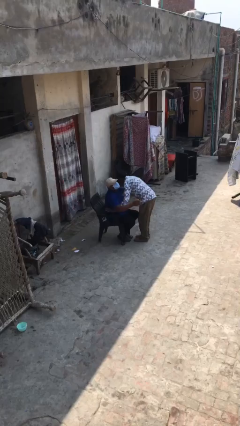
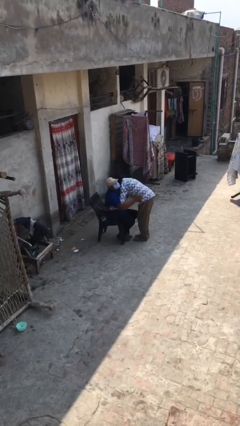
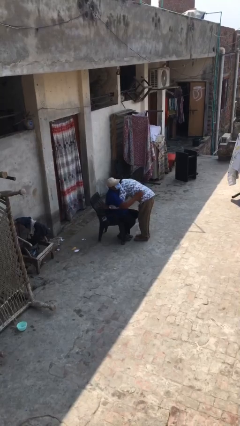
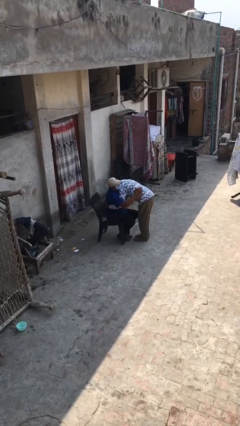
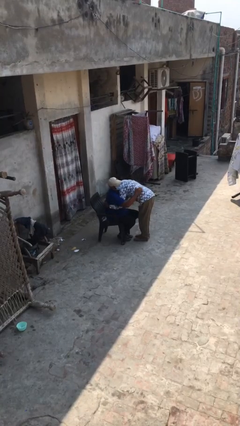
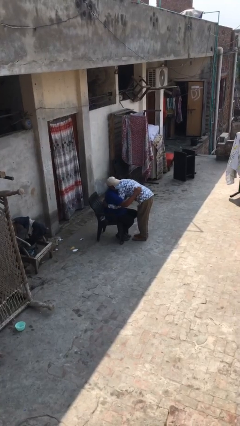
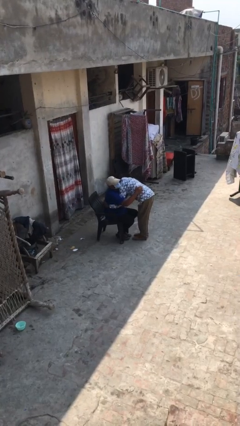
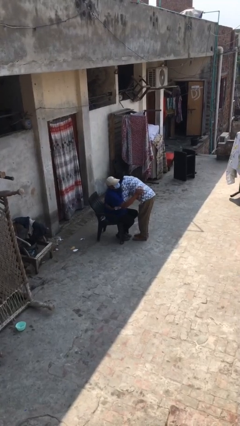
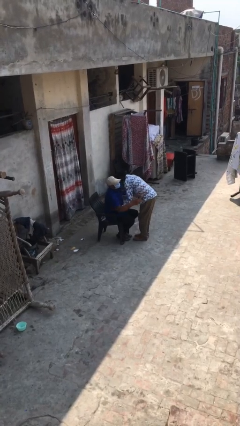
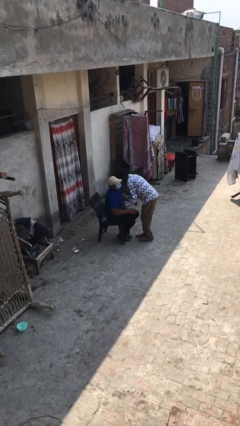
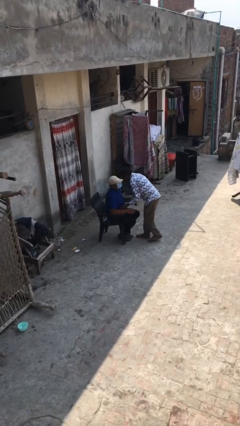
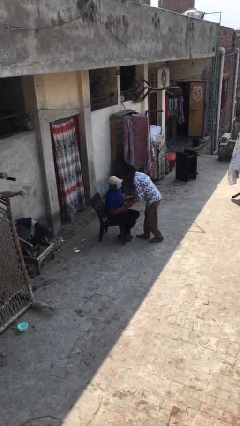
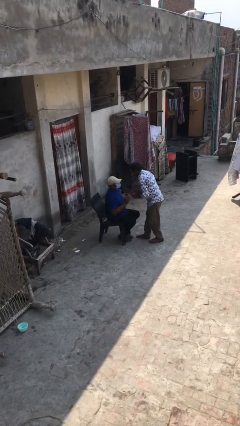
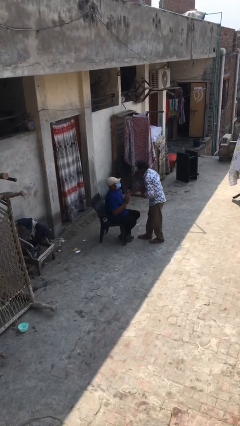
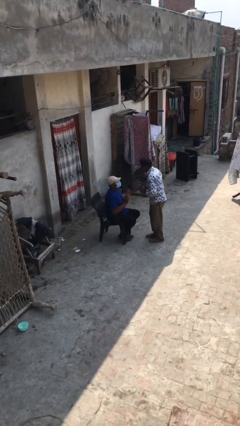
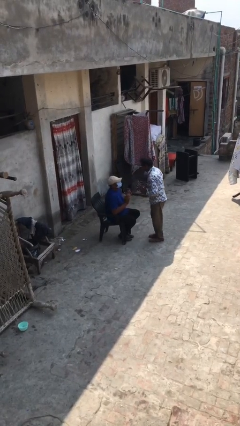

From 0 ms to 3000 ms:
person embraces person

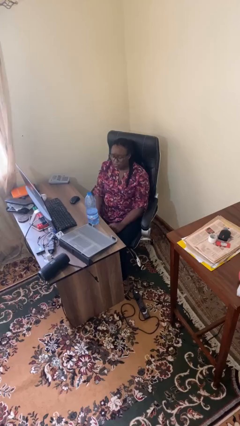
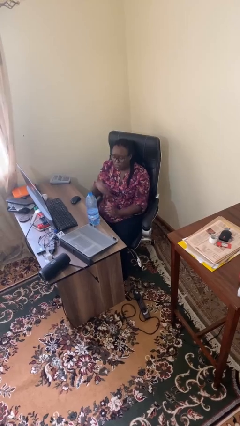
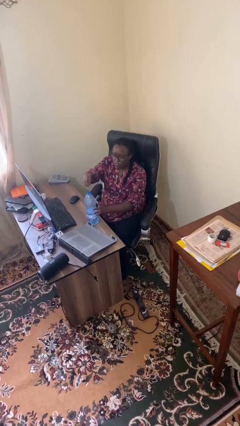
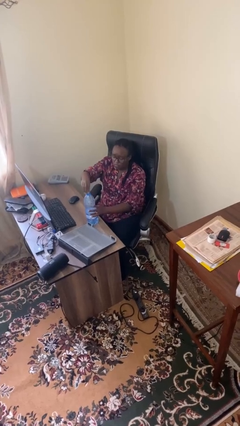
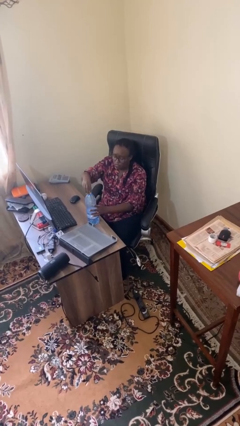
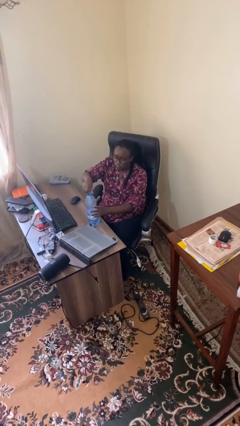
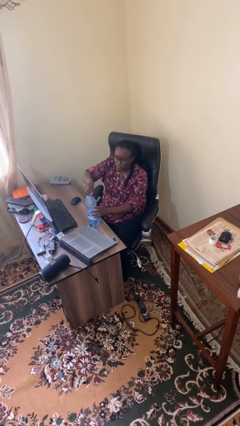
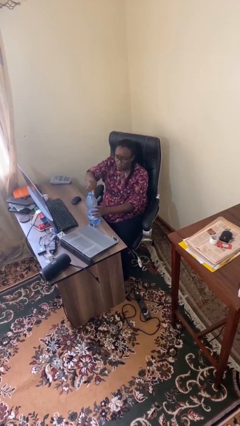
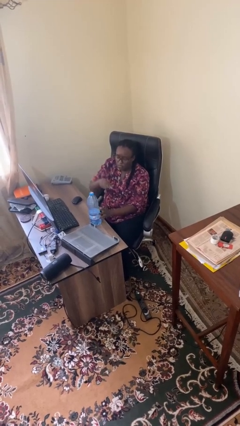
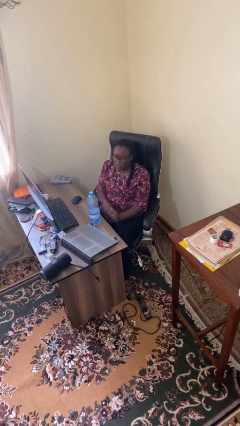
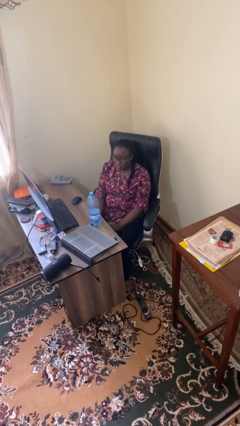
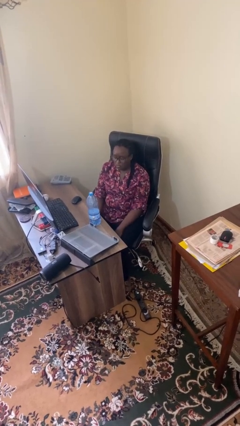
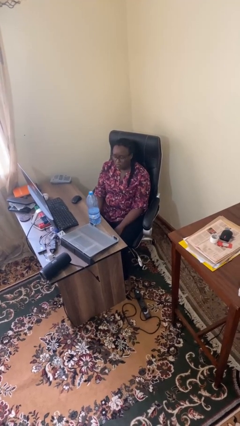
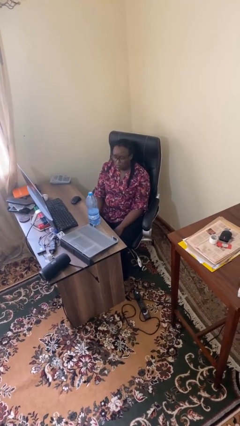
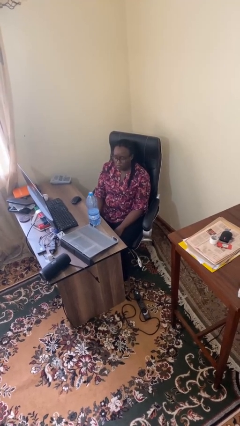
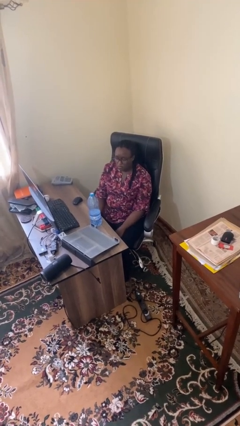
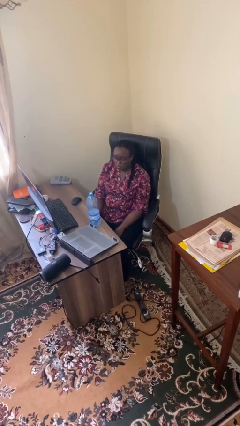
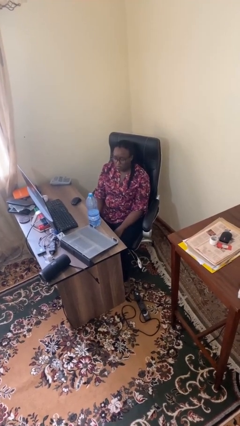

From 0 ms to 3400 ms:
person screws lid to bottle

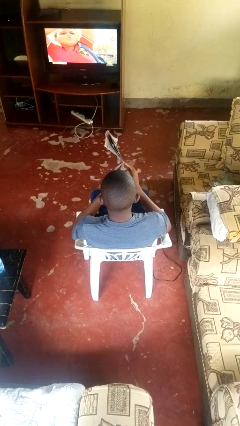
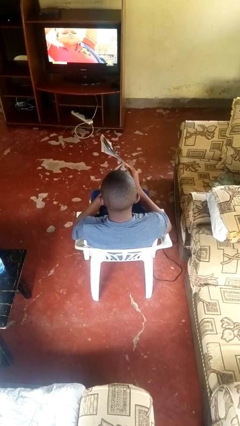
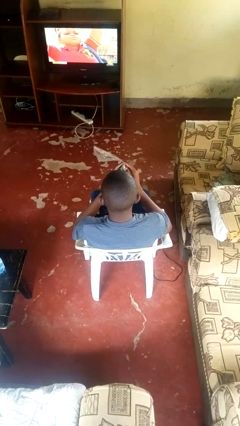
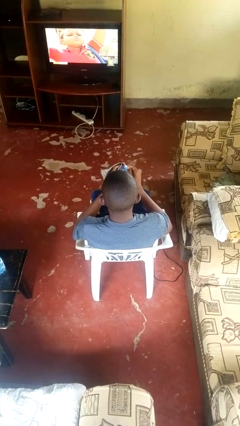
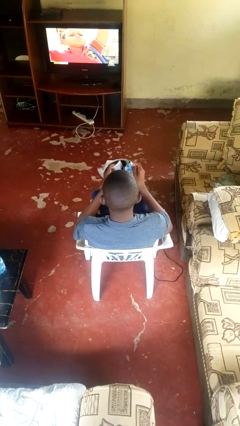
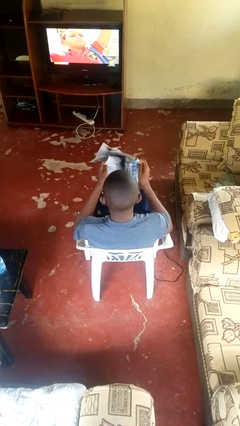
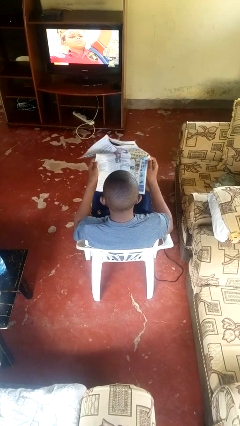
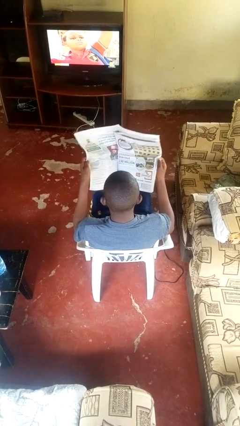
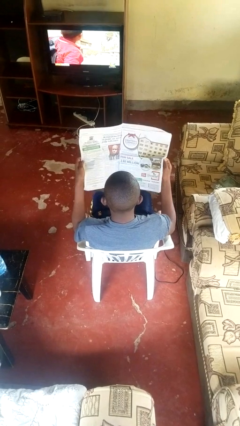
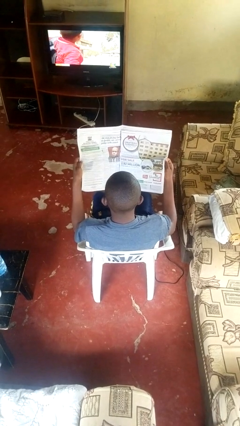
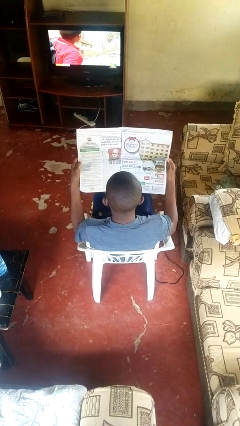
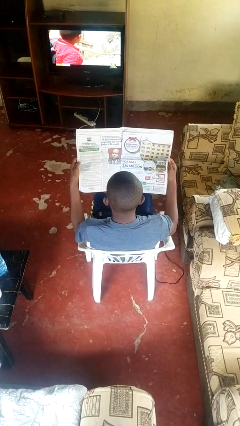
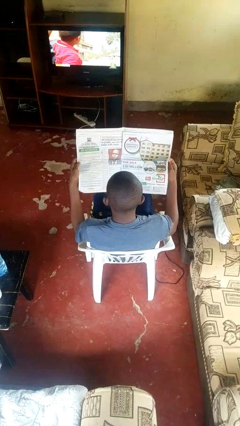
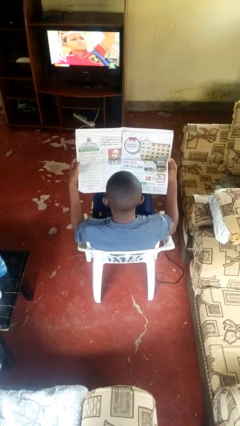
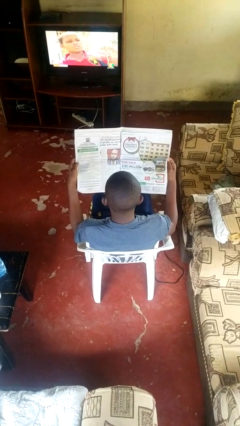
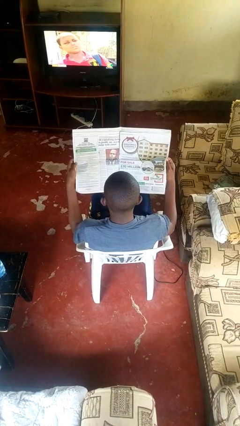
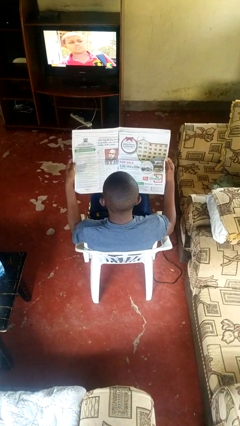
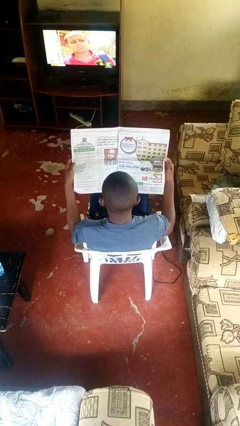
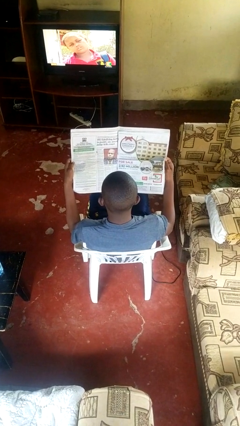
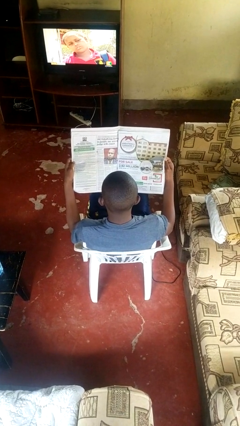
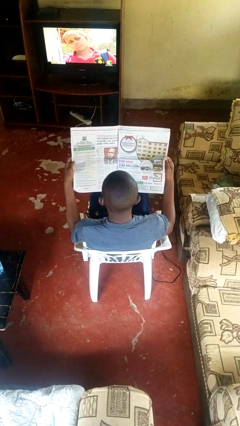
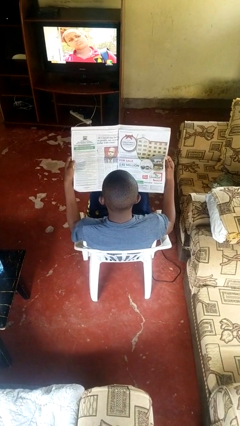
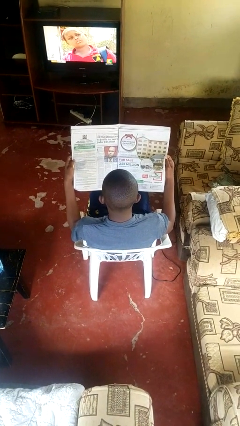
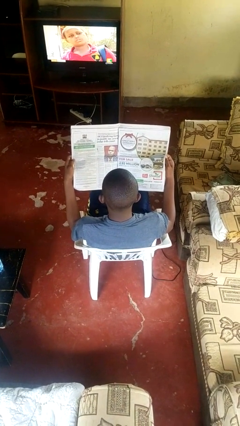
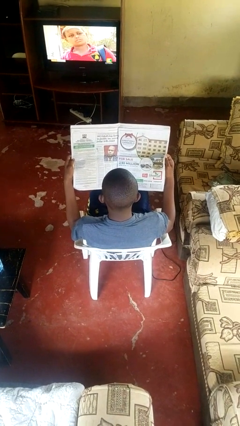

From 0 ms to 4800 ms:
person reads newspaper

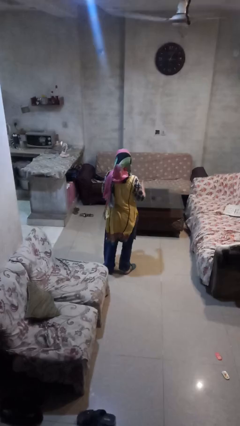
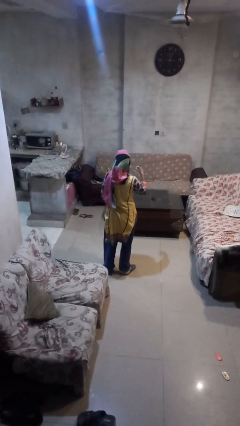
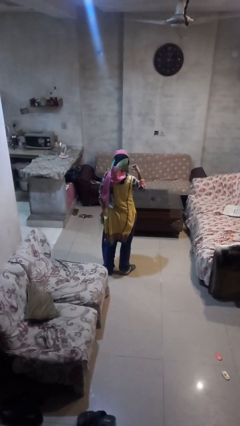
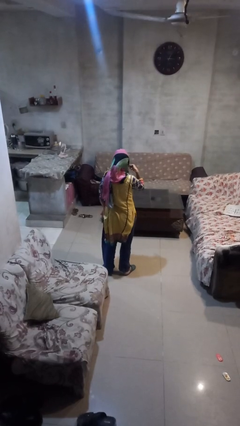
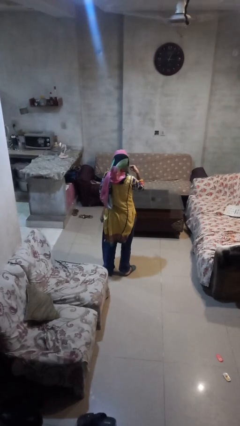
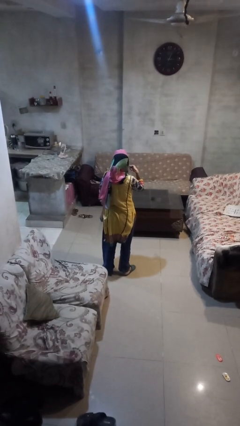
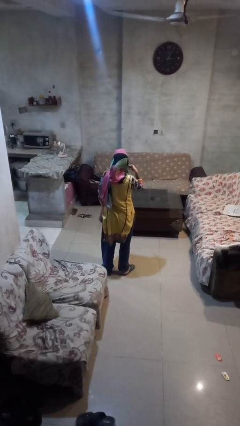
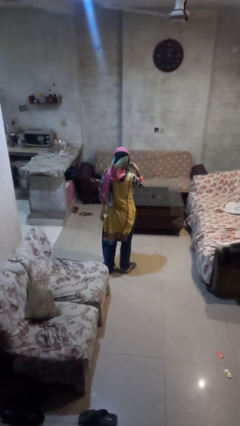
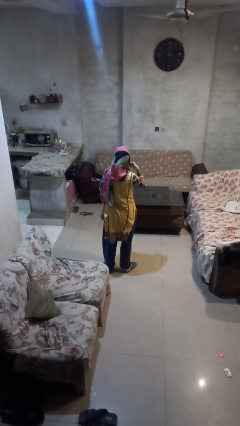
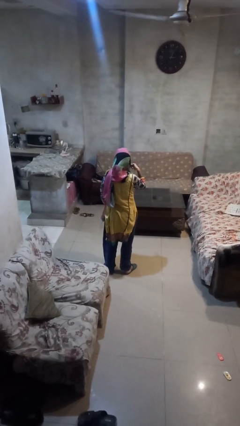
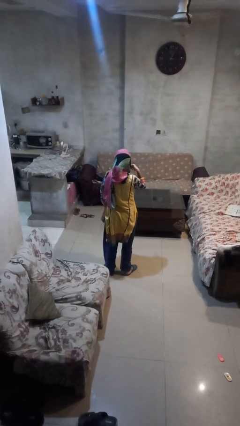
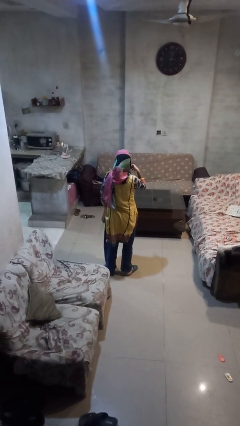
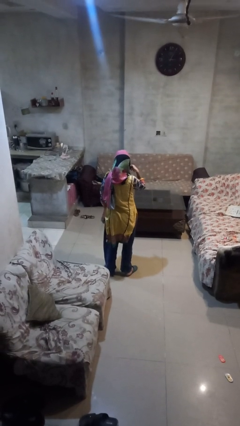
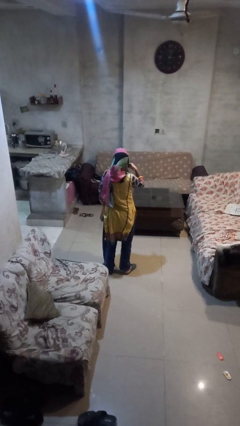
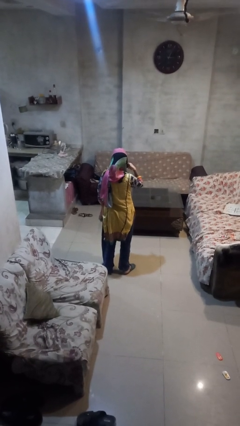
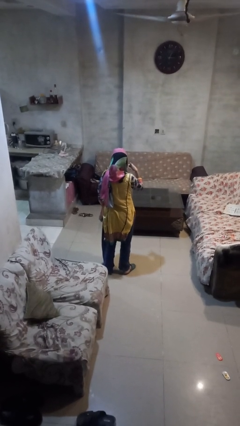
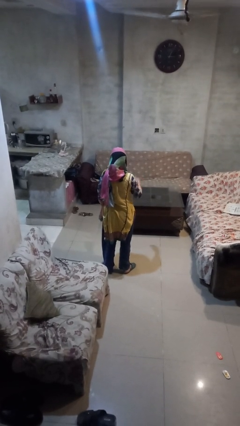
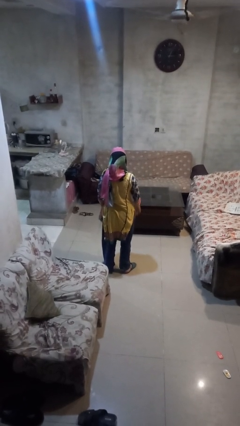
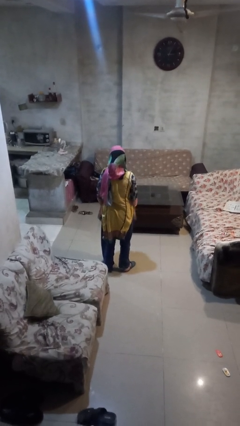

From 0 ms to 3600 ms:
person gestures call me

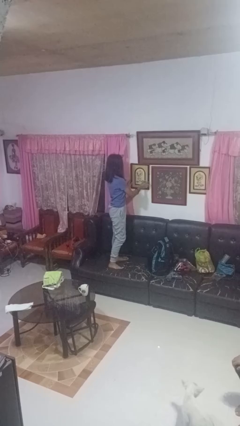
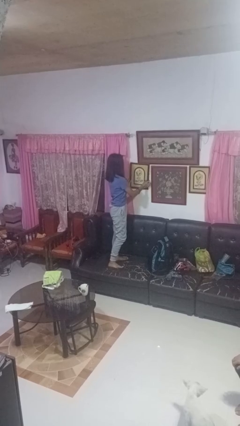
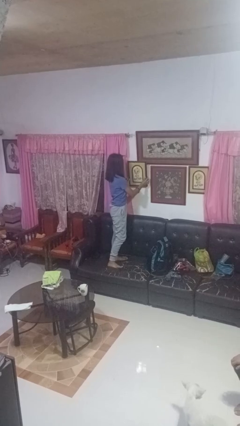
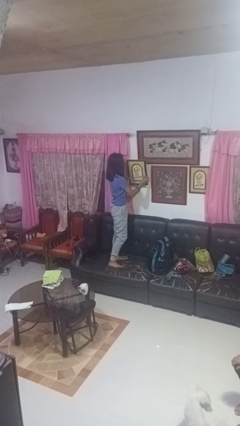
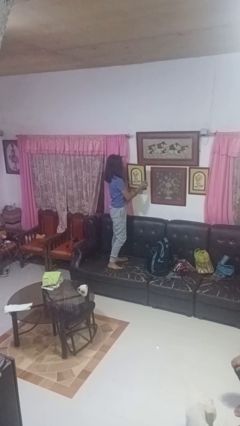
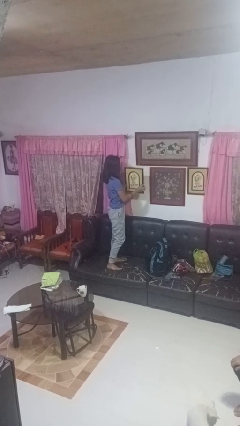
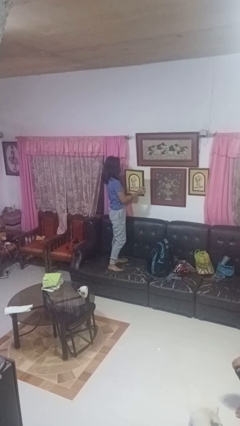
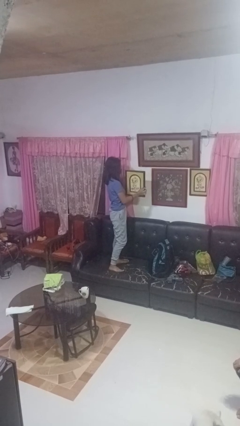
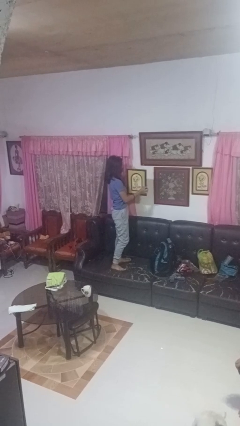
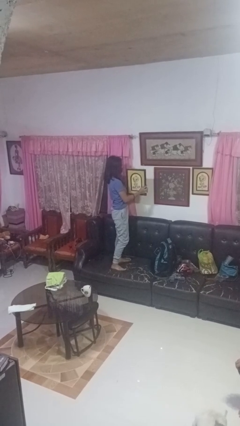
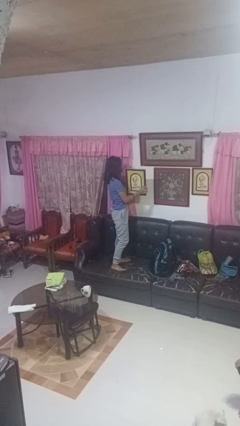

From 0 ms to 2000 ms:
person takes down picture frame

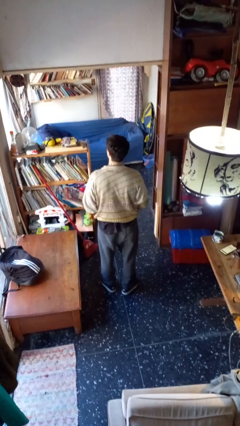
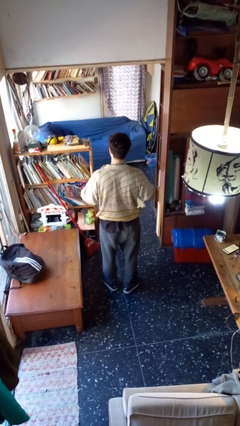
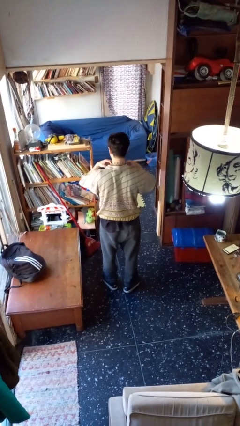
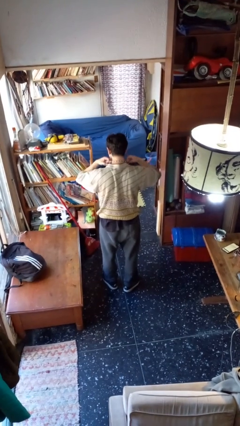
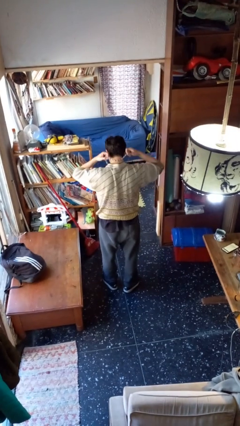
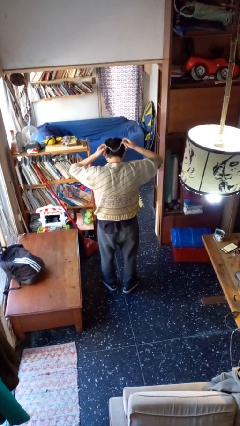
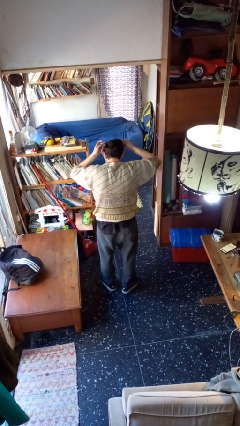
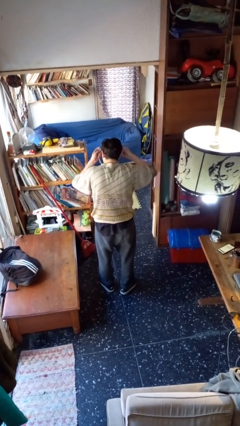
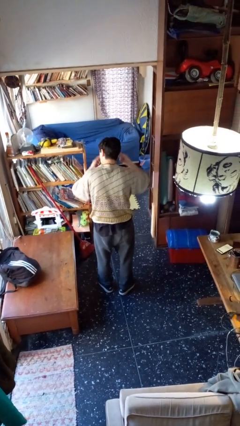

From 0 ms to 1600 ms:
person takes off necklace
